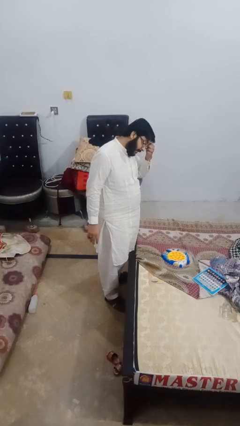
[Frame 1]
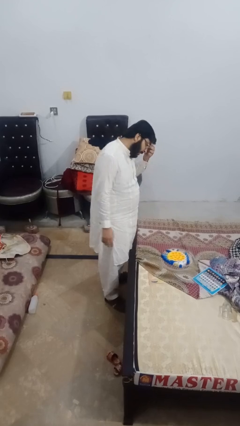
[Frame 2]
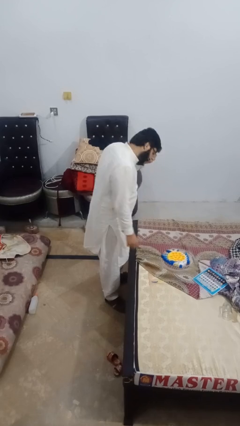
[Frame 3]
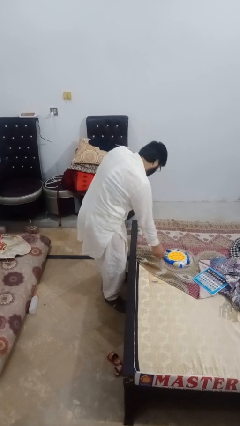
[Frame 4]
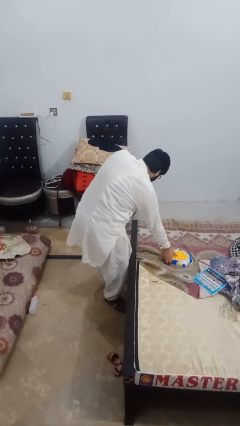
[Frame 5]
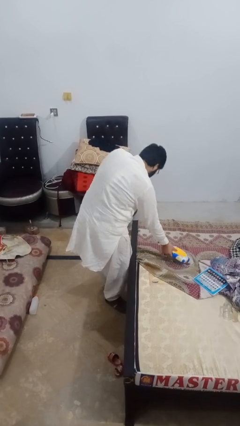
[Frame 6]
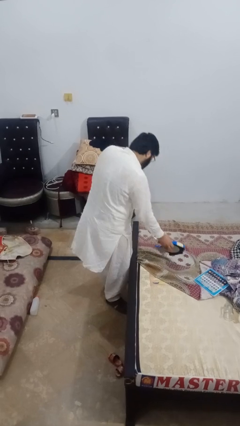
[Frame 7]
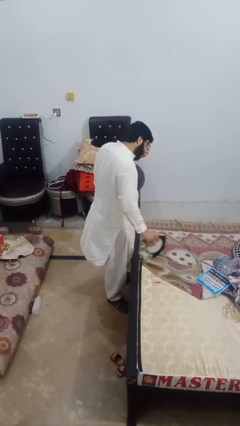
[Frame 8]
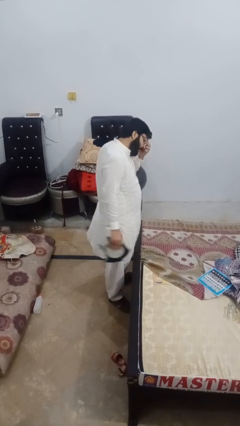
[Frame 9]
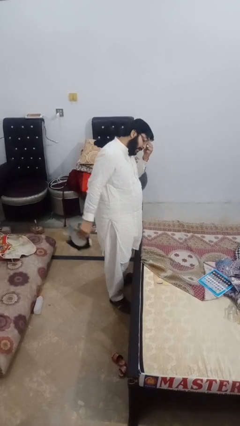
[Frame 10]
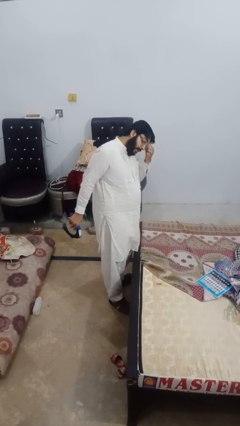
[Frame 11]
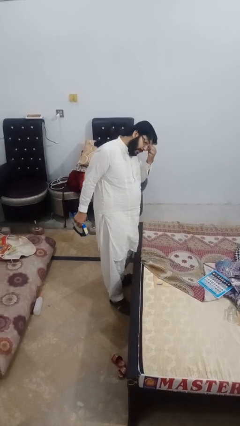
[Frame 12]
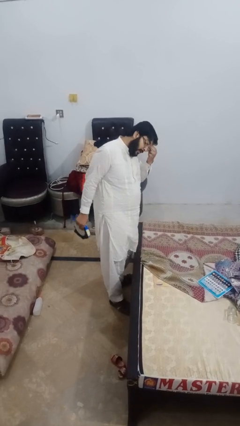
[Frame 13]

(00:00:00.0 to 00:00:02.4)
person picks up object from bed

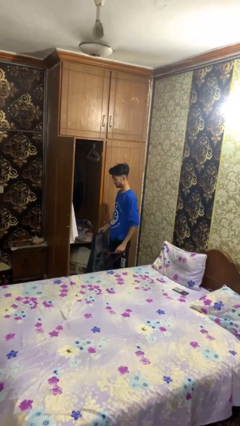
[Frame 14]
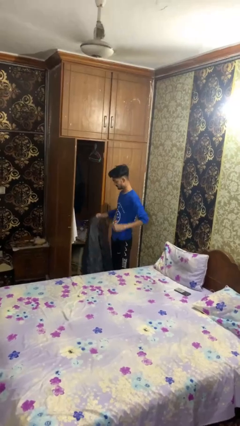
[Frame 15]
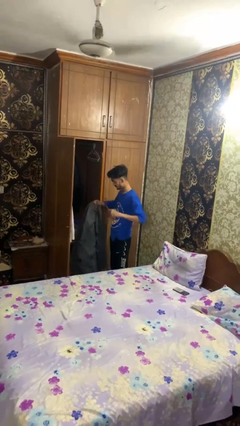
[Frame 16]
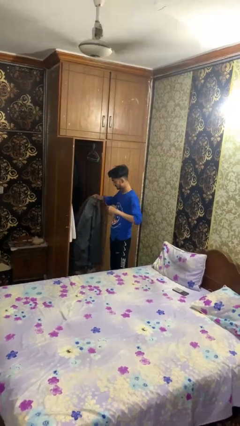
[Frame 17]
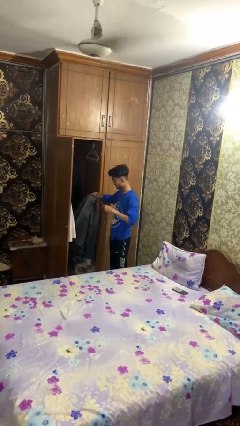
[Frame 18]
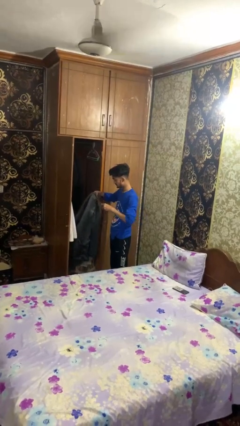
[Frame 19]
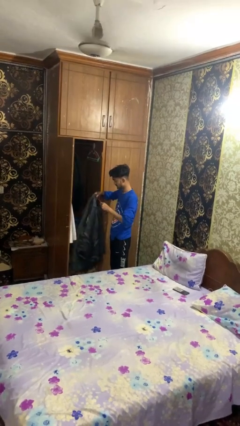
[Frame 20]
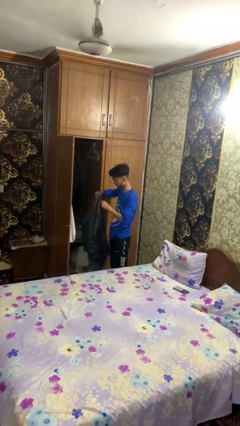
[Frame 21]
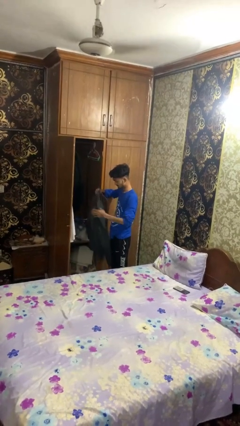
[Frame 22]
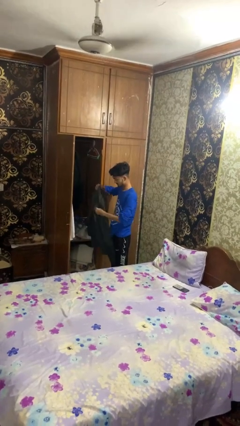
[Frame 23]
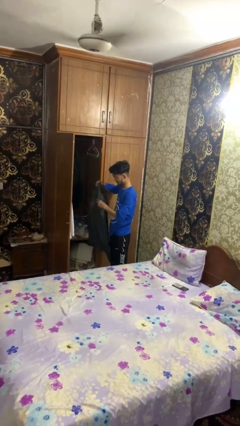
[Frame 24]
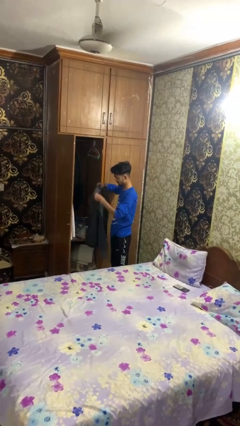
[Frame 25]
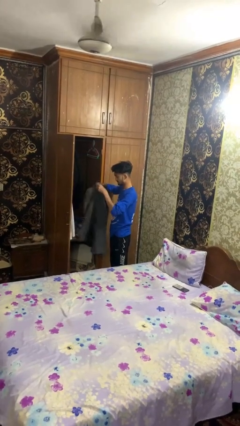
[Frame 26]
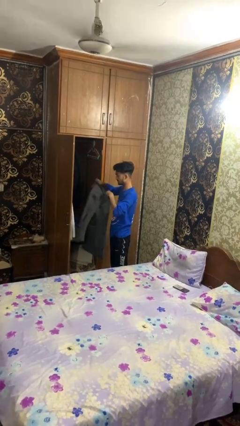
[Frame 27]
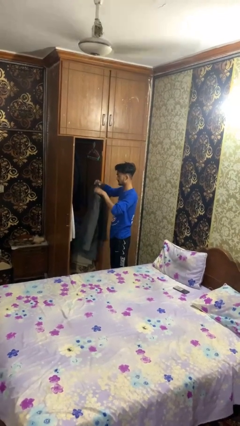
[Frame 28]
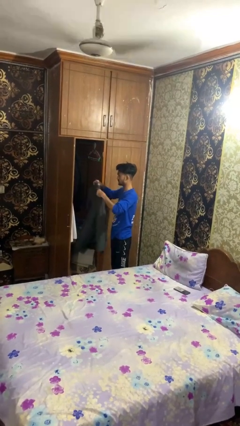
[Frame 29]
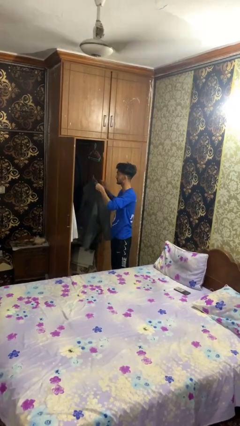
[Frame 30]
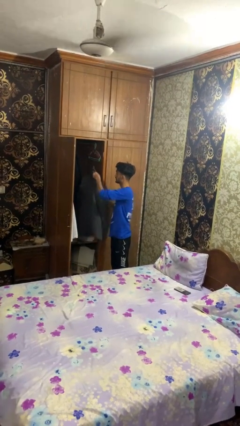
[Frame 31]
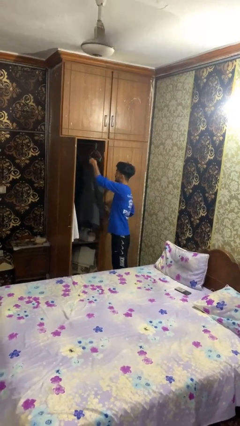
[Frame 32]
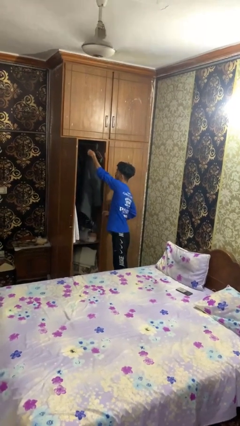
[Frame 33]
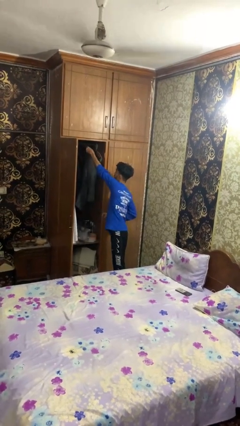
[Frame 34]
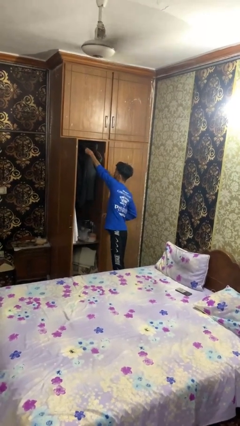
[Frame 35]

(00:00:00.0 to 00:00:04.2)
person puts clothes into closet

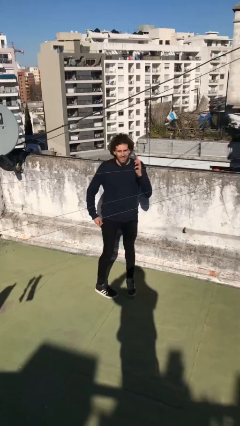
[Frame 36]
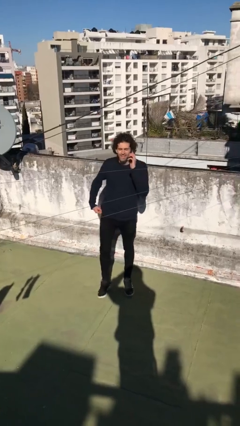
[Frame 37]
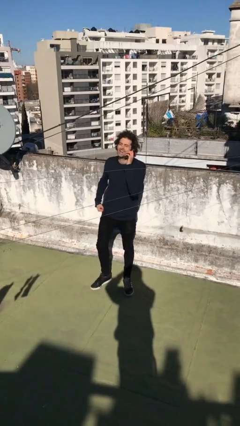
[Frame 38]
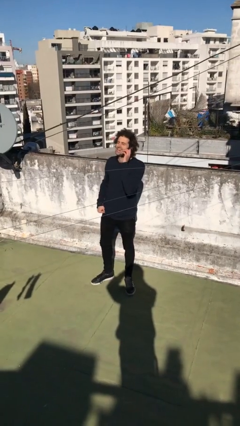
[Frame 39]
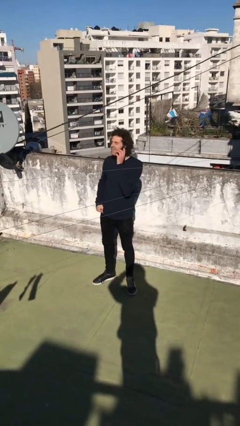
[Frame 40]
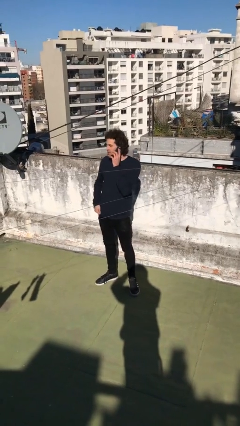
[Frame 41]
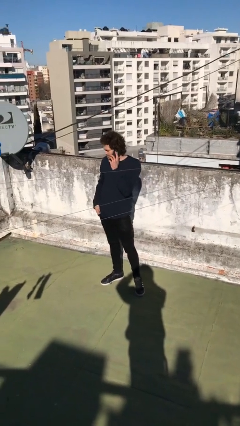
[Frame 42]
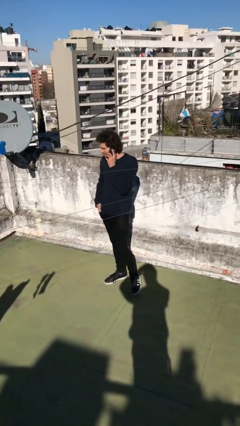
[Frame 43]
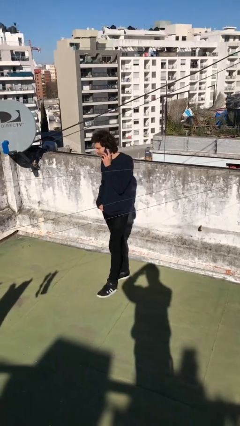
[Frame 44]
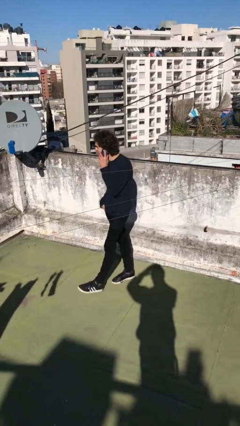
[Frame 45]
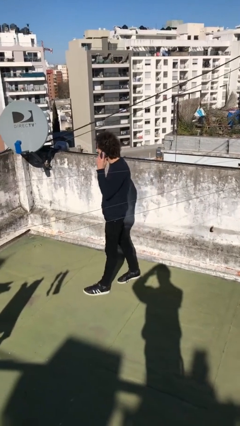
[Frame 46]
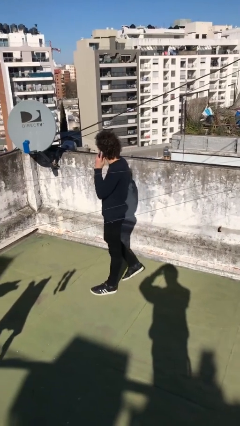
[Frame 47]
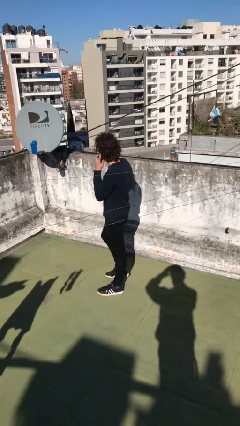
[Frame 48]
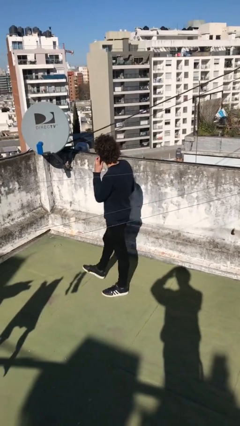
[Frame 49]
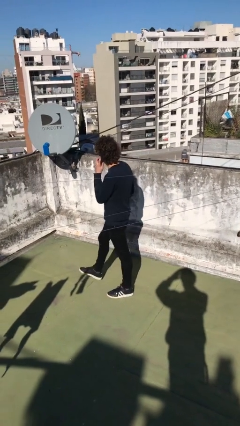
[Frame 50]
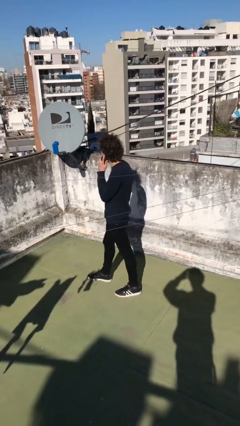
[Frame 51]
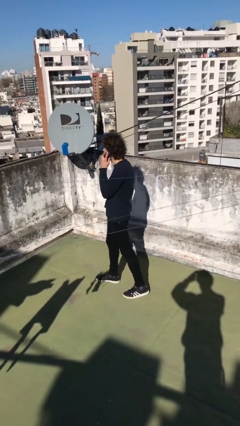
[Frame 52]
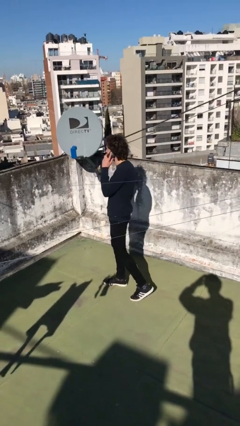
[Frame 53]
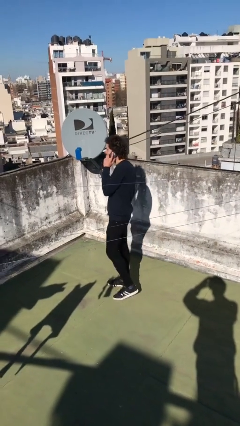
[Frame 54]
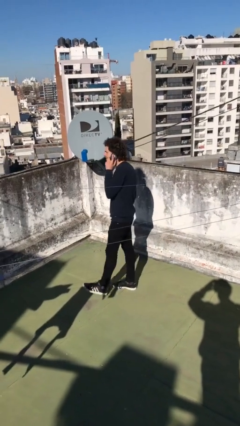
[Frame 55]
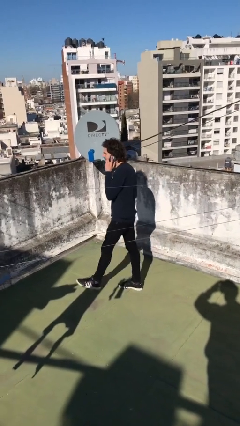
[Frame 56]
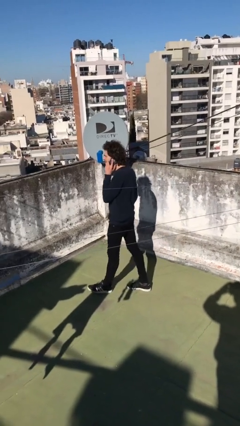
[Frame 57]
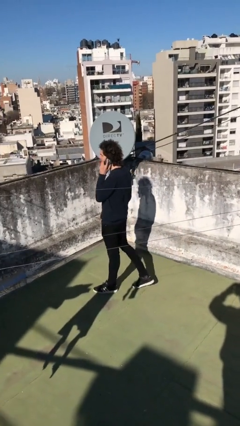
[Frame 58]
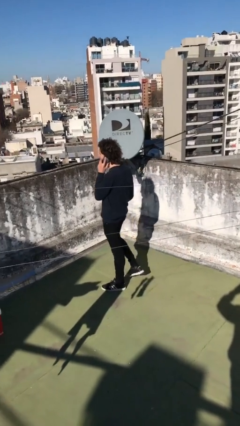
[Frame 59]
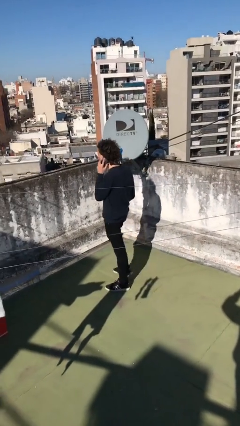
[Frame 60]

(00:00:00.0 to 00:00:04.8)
person talks on phone

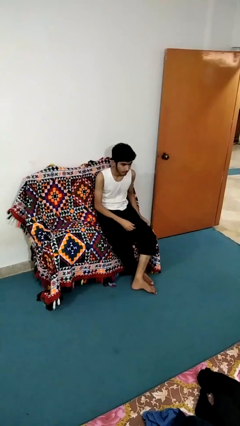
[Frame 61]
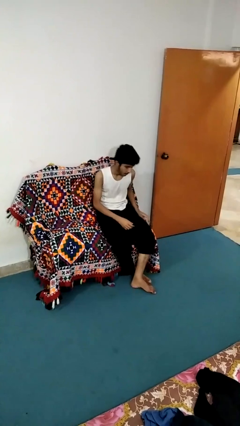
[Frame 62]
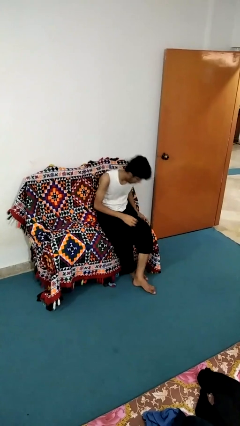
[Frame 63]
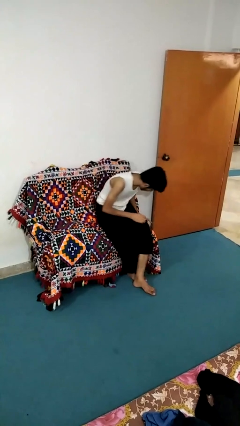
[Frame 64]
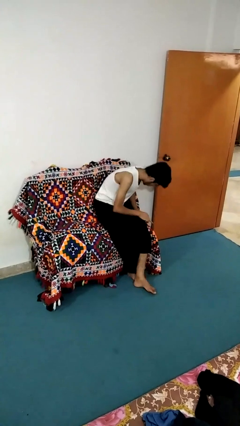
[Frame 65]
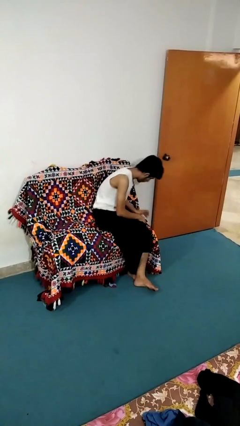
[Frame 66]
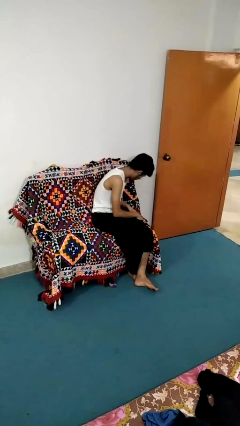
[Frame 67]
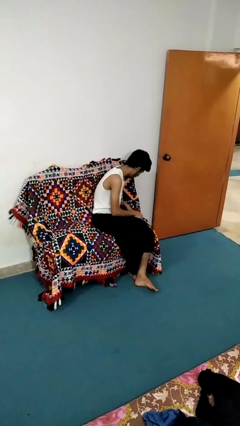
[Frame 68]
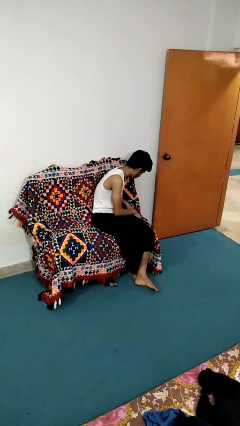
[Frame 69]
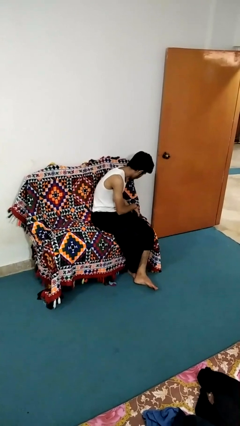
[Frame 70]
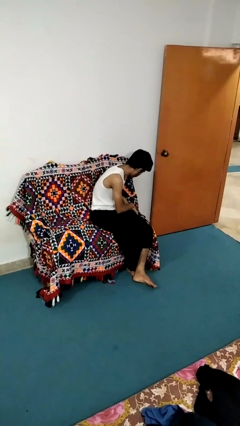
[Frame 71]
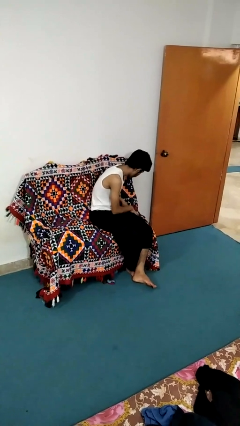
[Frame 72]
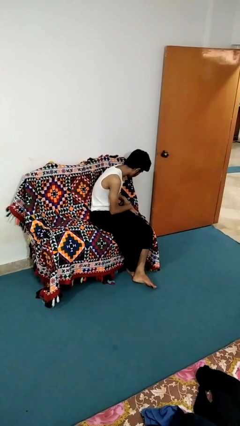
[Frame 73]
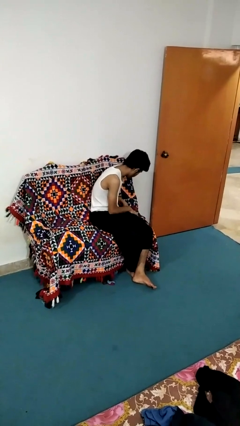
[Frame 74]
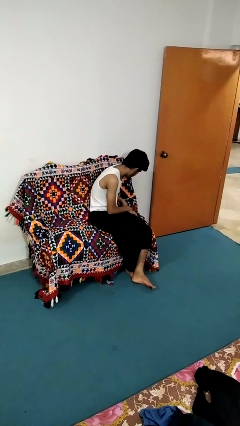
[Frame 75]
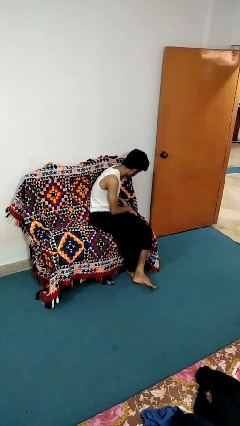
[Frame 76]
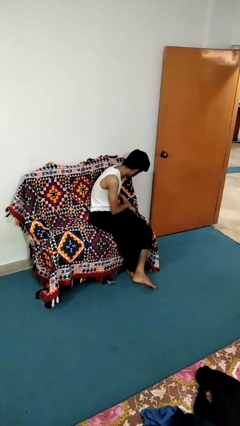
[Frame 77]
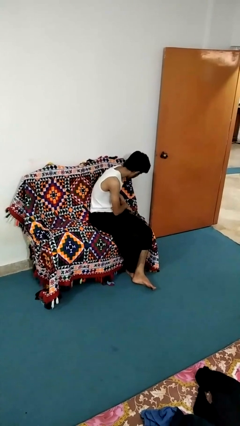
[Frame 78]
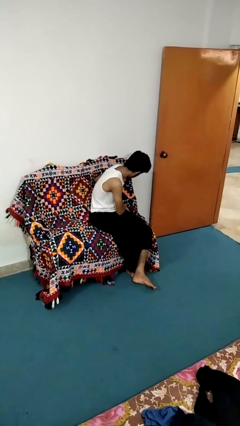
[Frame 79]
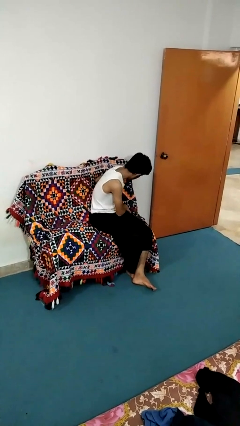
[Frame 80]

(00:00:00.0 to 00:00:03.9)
person searches in couch

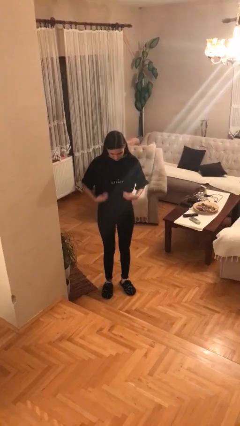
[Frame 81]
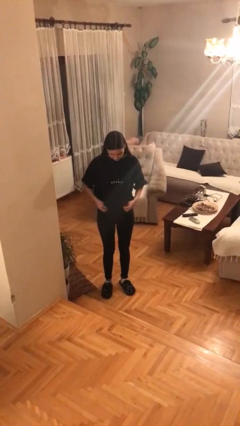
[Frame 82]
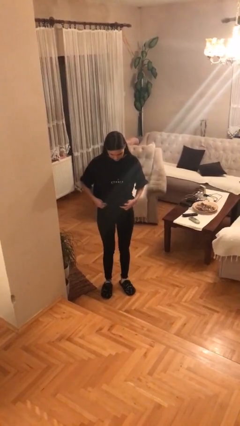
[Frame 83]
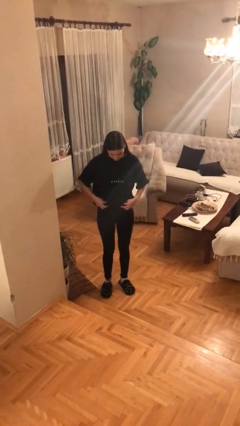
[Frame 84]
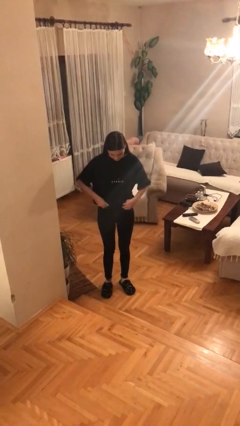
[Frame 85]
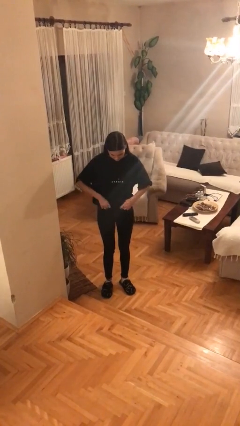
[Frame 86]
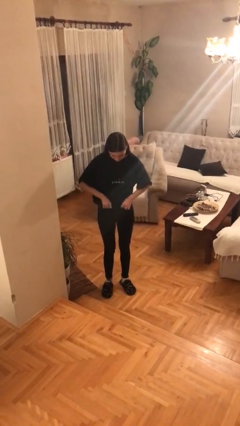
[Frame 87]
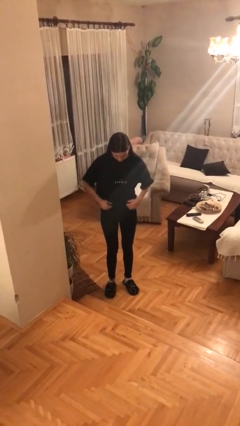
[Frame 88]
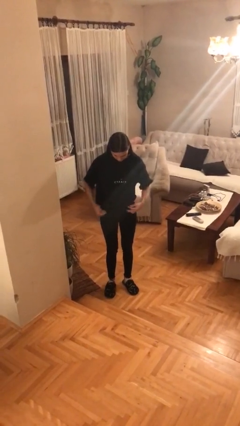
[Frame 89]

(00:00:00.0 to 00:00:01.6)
person tucks in shirt

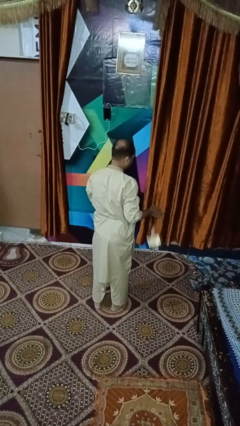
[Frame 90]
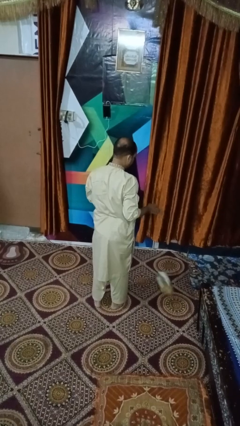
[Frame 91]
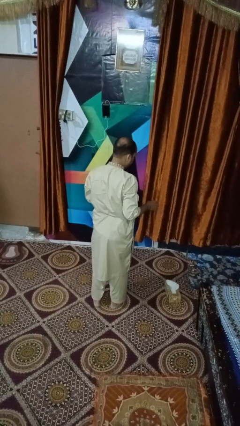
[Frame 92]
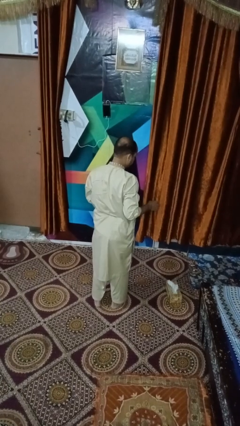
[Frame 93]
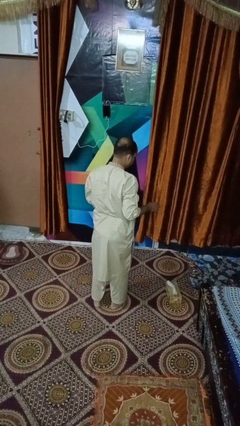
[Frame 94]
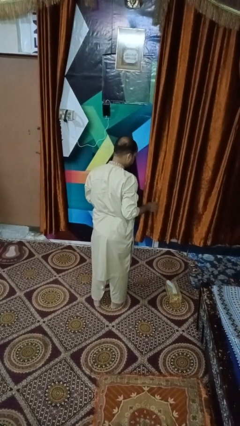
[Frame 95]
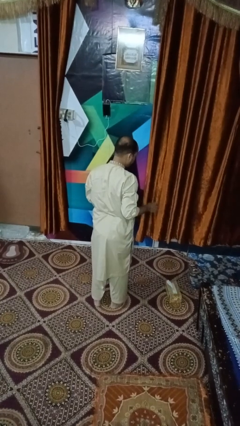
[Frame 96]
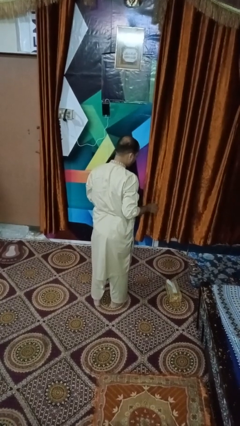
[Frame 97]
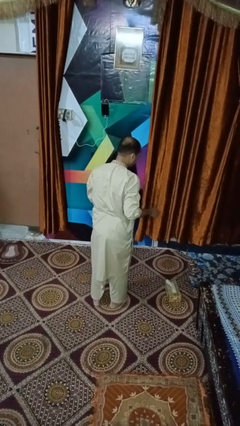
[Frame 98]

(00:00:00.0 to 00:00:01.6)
person drops object
